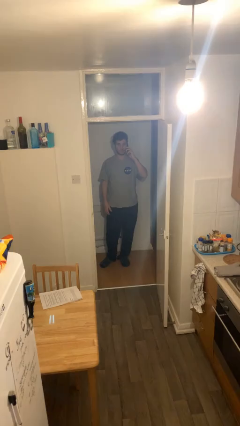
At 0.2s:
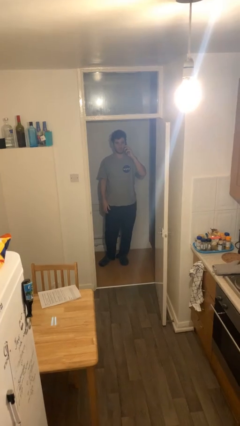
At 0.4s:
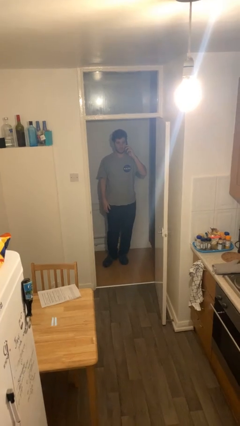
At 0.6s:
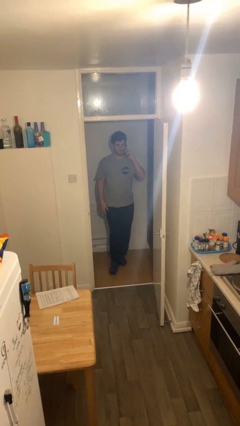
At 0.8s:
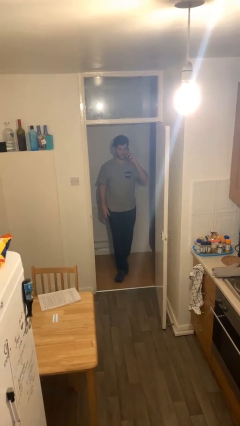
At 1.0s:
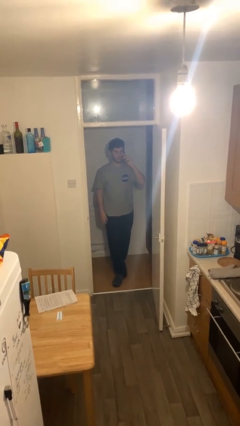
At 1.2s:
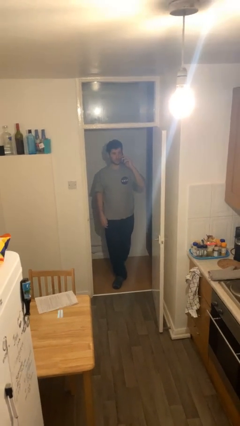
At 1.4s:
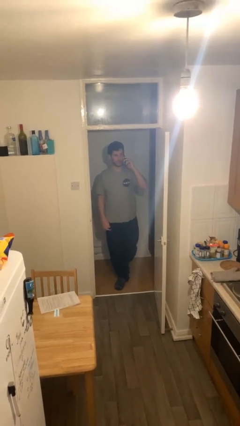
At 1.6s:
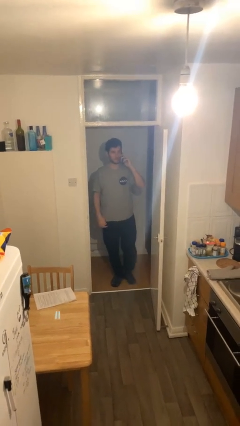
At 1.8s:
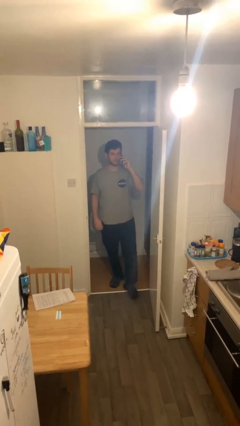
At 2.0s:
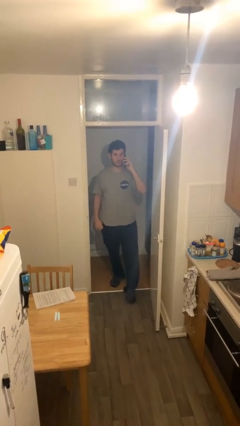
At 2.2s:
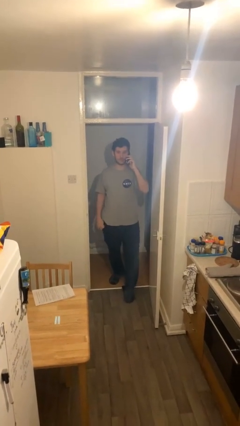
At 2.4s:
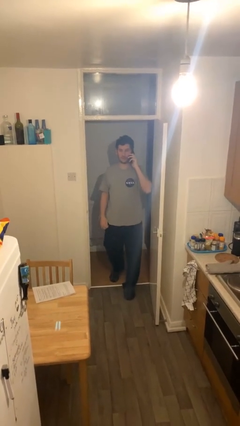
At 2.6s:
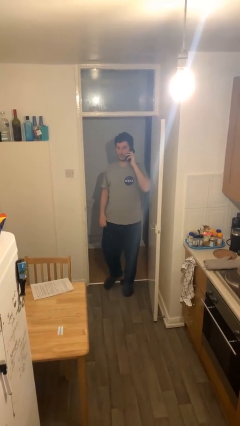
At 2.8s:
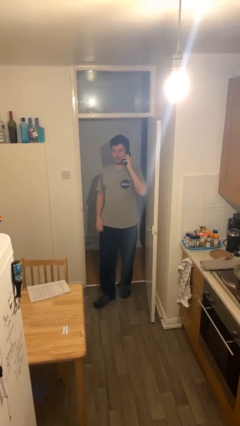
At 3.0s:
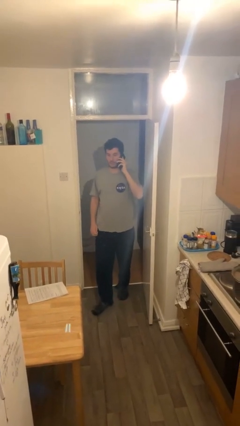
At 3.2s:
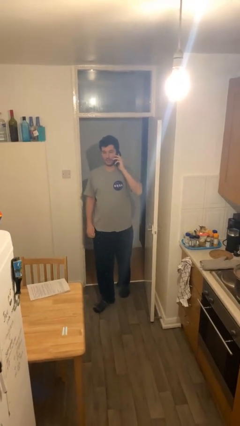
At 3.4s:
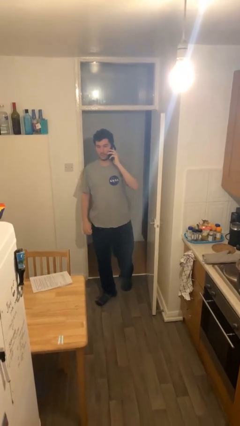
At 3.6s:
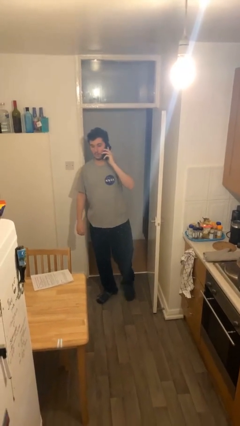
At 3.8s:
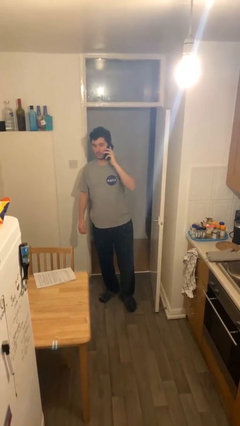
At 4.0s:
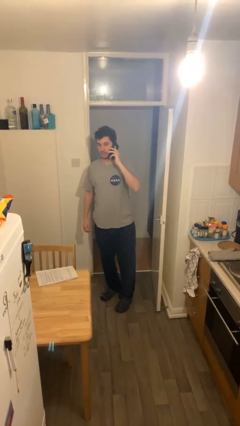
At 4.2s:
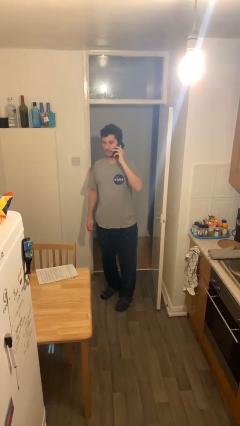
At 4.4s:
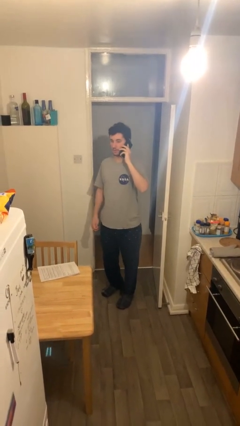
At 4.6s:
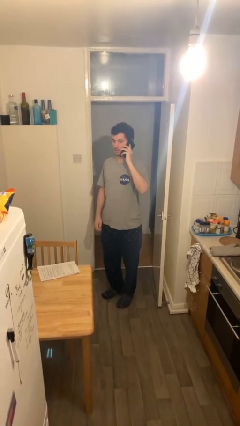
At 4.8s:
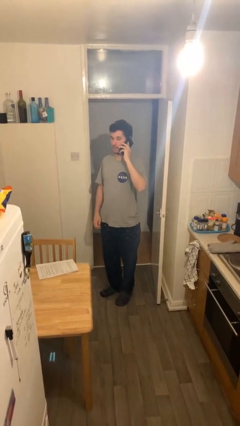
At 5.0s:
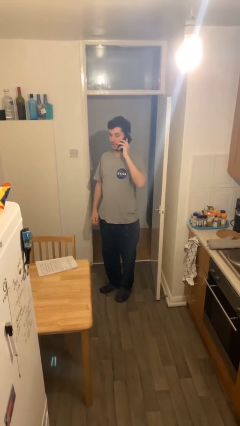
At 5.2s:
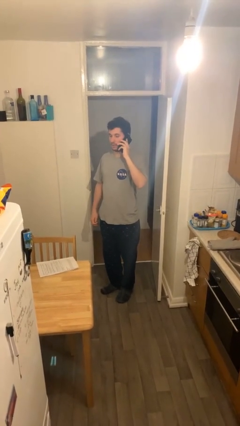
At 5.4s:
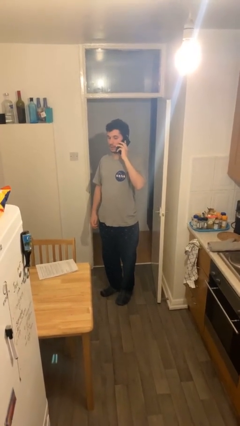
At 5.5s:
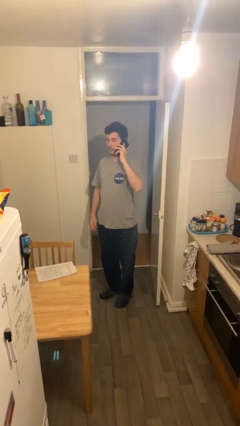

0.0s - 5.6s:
person enters scene through structure

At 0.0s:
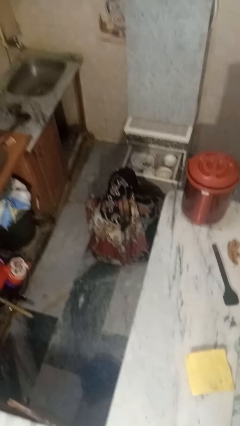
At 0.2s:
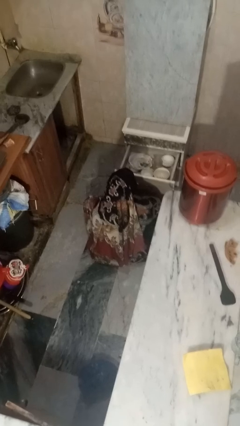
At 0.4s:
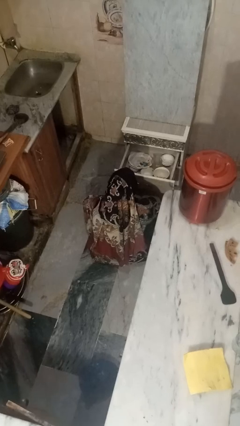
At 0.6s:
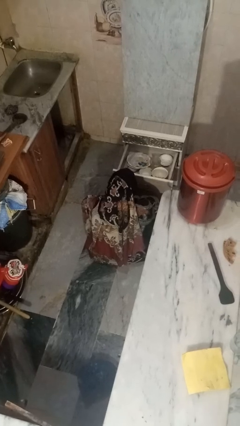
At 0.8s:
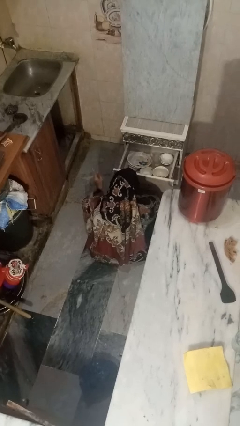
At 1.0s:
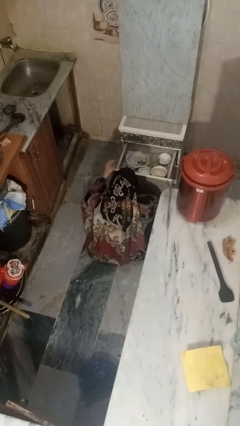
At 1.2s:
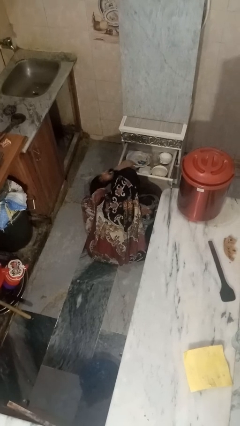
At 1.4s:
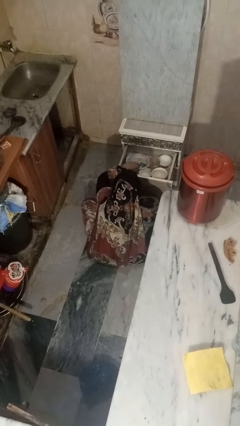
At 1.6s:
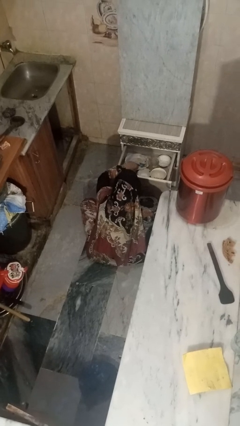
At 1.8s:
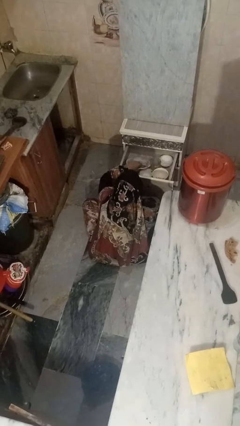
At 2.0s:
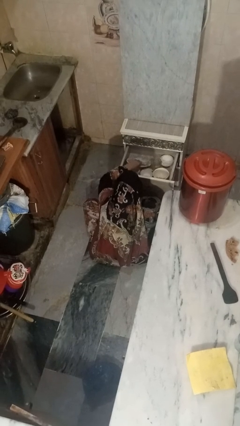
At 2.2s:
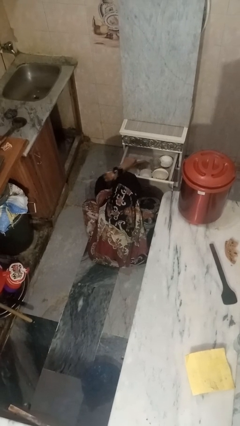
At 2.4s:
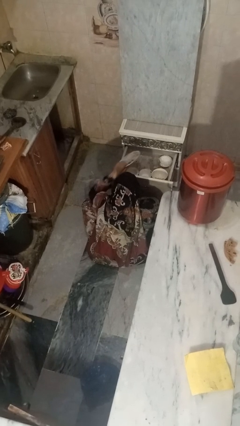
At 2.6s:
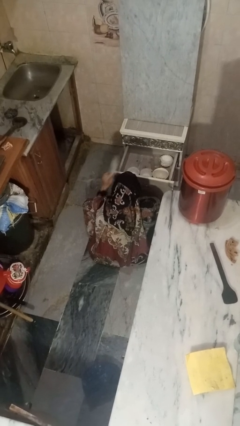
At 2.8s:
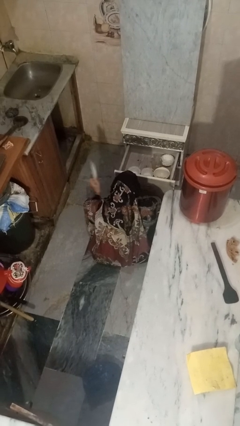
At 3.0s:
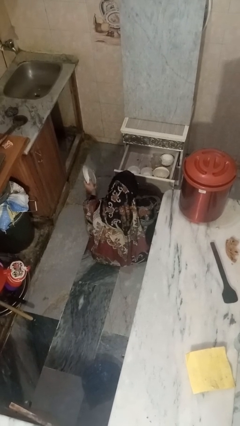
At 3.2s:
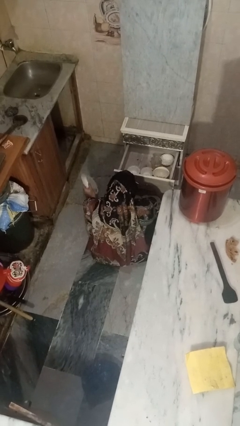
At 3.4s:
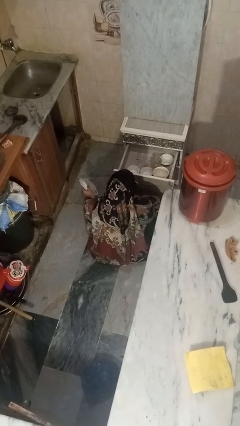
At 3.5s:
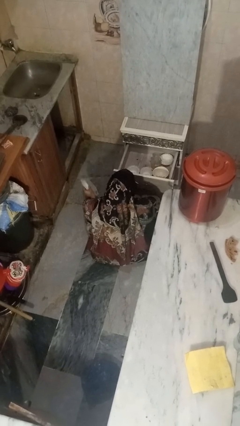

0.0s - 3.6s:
person takes object from kitchen drawer

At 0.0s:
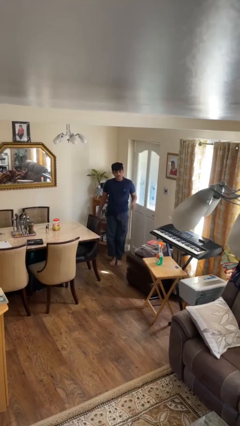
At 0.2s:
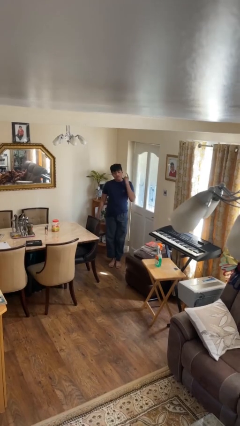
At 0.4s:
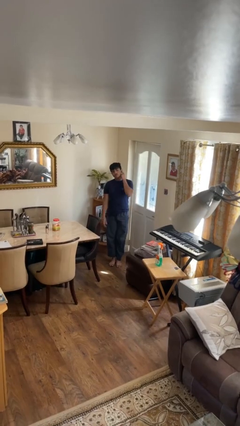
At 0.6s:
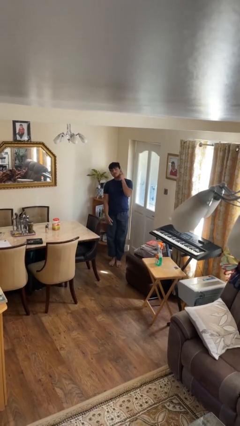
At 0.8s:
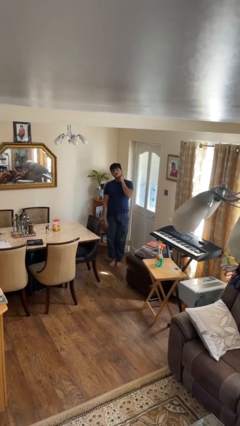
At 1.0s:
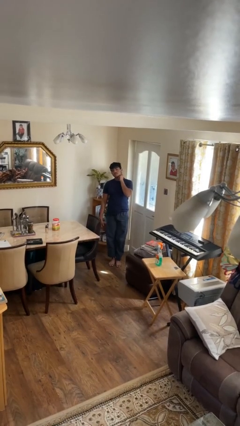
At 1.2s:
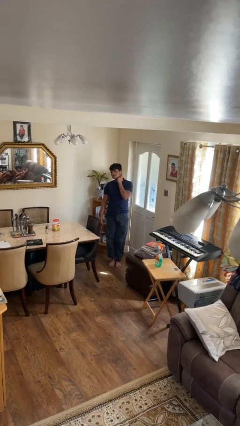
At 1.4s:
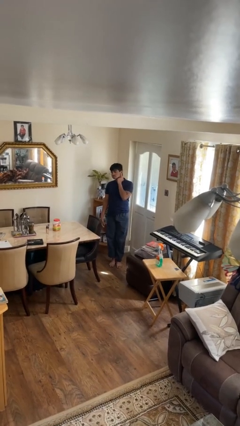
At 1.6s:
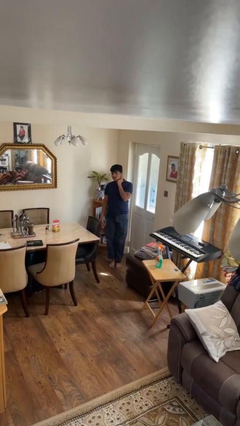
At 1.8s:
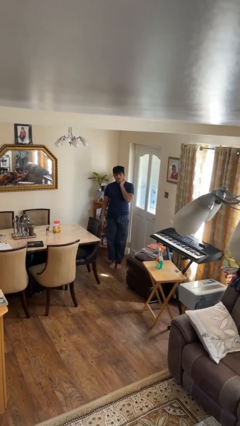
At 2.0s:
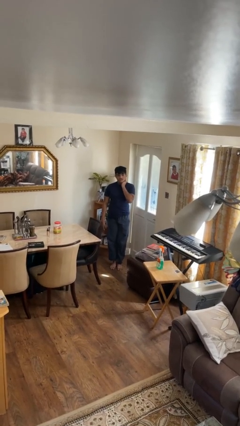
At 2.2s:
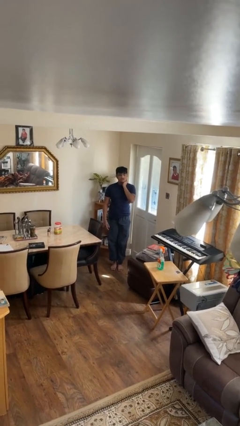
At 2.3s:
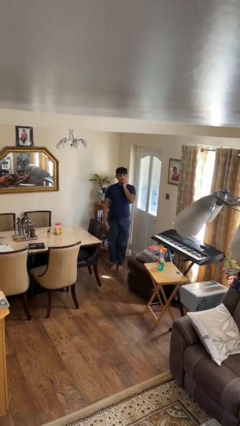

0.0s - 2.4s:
person puts fingers in ear

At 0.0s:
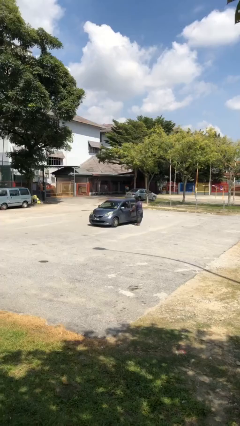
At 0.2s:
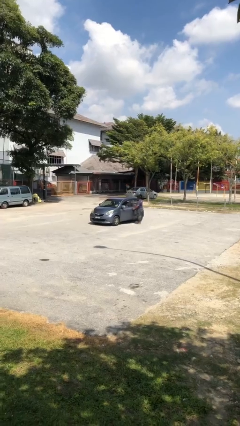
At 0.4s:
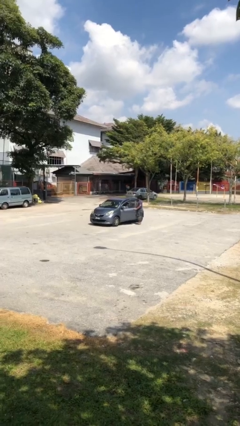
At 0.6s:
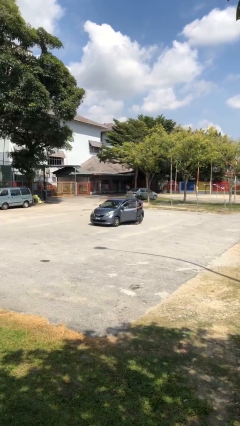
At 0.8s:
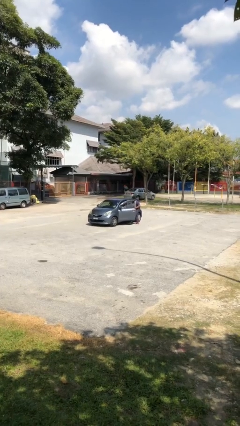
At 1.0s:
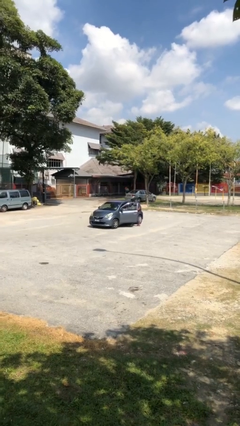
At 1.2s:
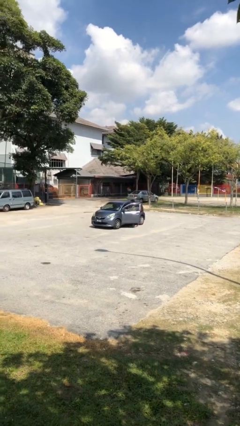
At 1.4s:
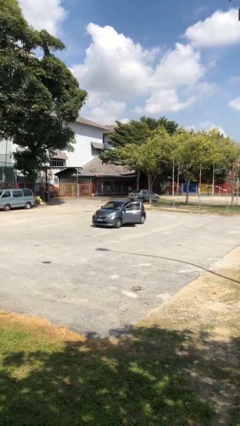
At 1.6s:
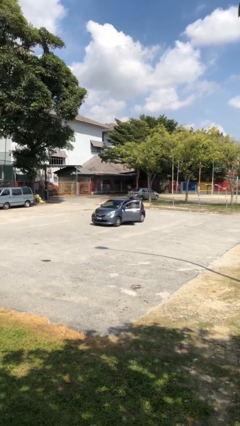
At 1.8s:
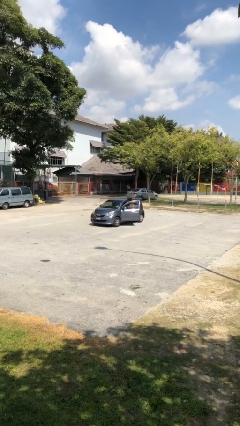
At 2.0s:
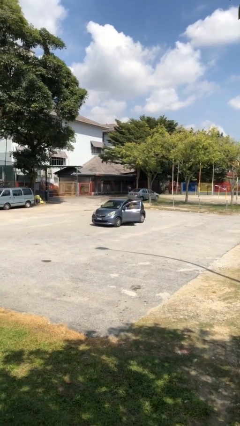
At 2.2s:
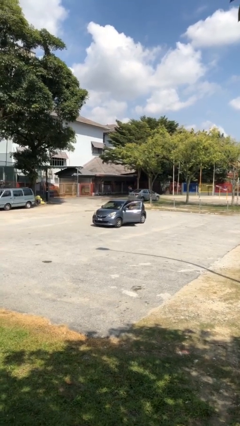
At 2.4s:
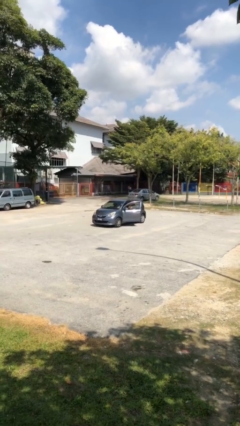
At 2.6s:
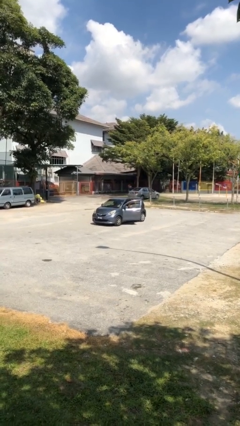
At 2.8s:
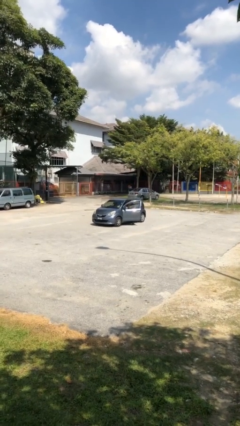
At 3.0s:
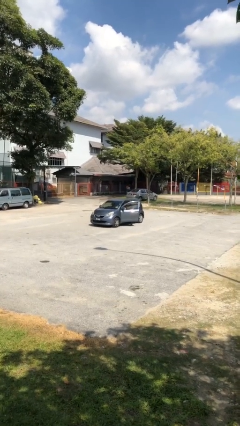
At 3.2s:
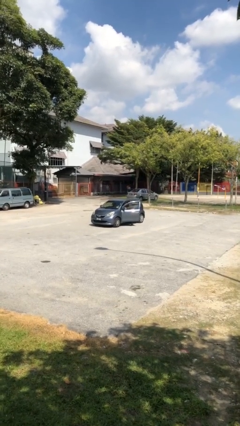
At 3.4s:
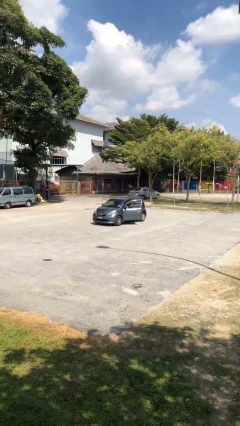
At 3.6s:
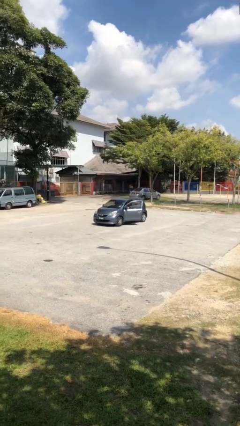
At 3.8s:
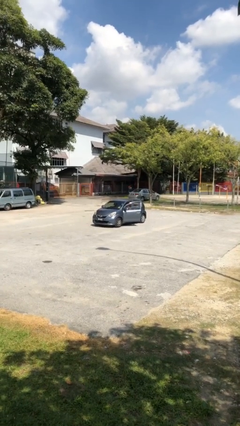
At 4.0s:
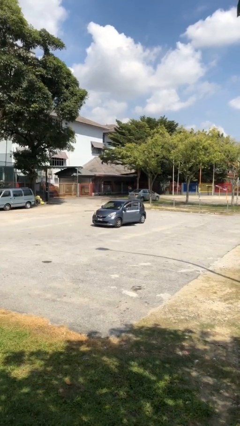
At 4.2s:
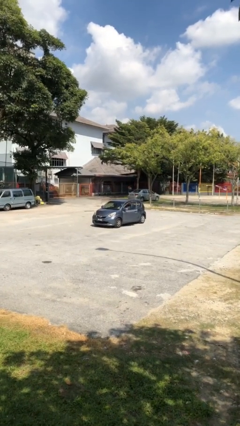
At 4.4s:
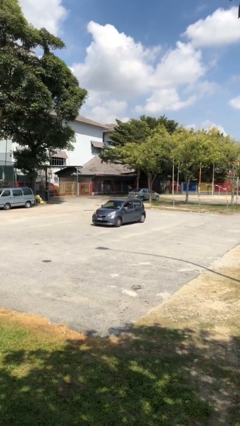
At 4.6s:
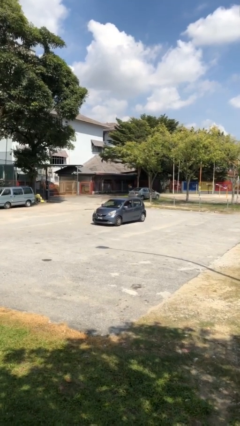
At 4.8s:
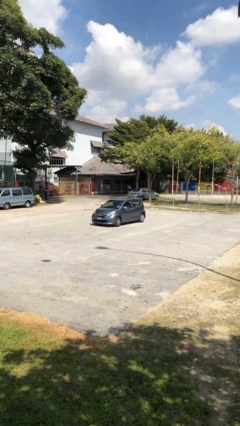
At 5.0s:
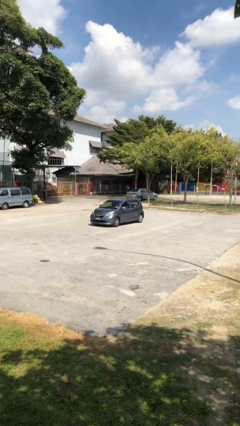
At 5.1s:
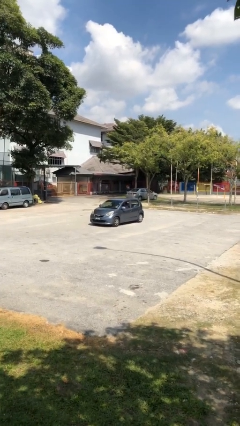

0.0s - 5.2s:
car picks up person

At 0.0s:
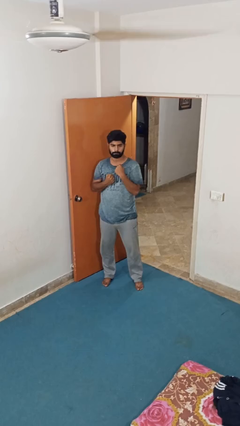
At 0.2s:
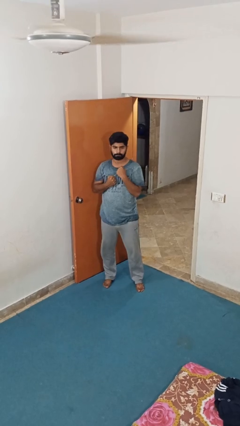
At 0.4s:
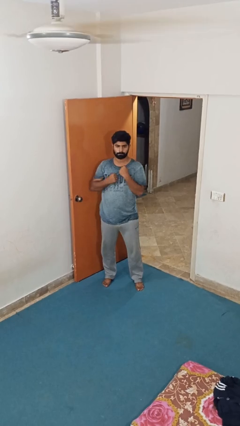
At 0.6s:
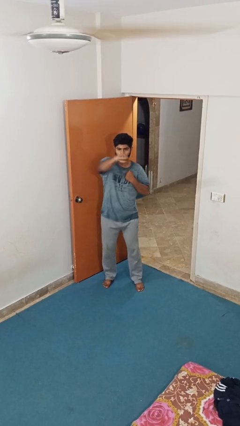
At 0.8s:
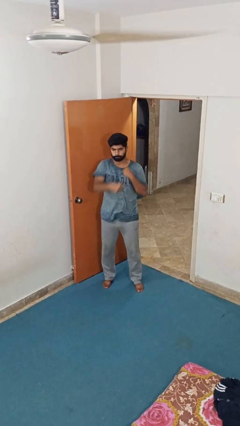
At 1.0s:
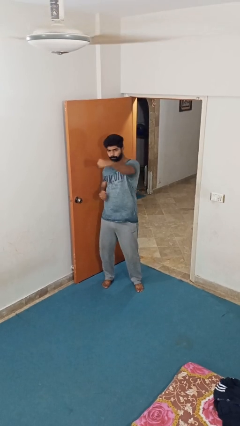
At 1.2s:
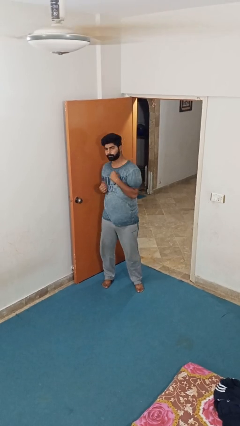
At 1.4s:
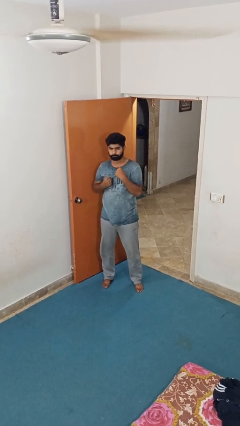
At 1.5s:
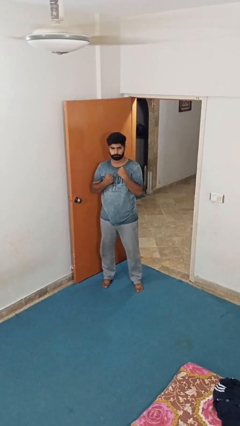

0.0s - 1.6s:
person punches
